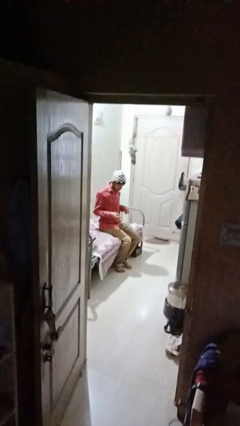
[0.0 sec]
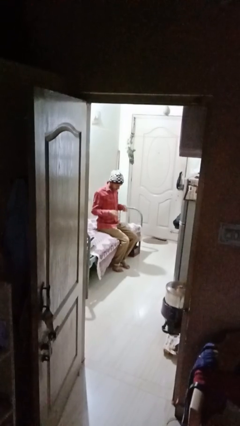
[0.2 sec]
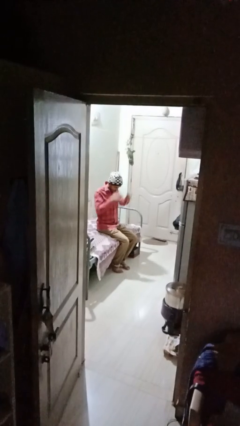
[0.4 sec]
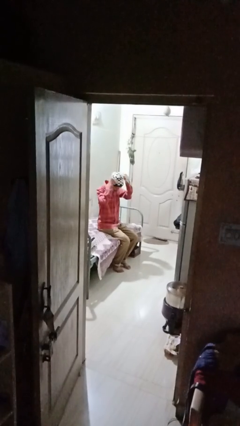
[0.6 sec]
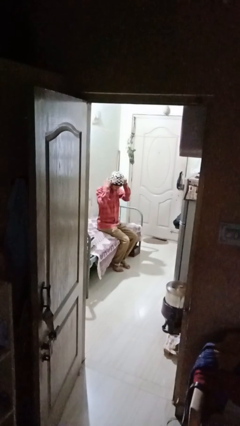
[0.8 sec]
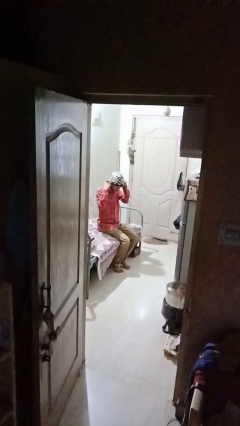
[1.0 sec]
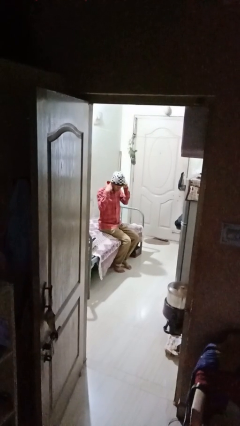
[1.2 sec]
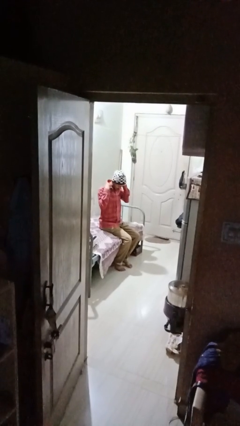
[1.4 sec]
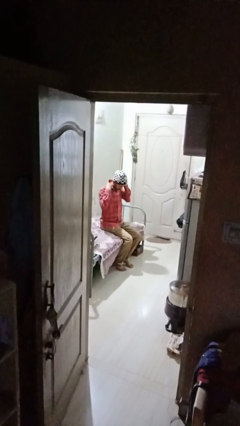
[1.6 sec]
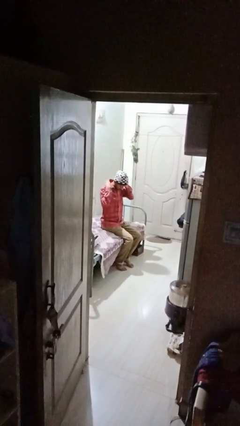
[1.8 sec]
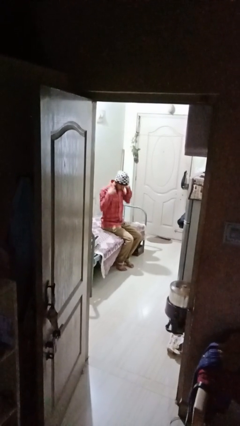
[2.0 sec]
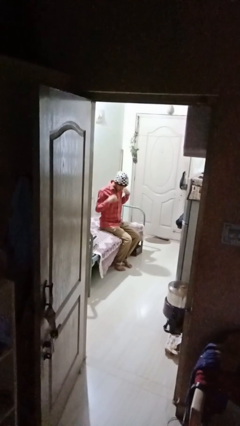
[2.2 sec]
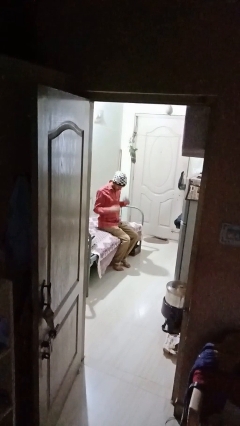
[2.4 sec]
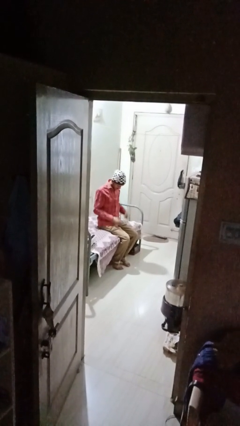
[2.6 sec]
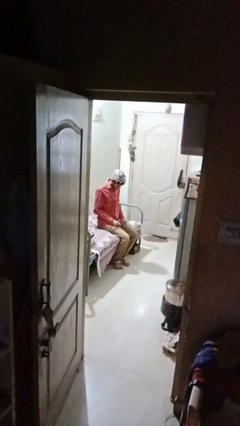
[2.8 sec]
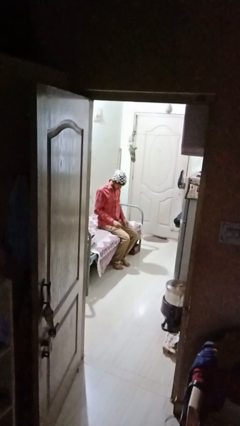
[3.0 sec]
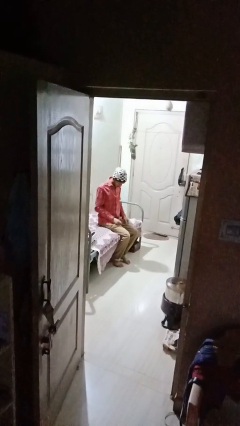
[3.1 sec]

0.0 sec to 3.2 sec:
person puts on necklace

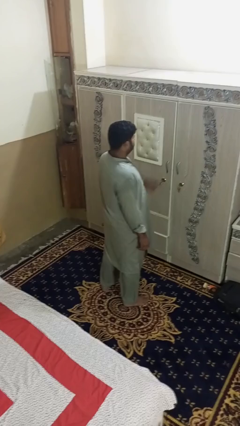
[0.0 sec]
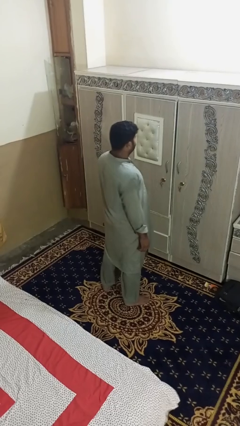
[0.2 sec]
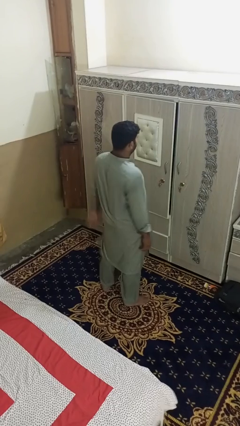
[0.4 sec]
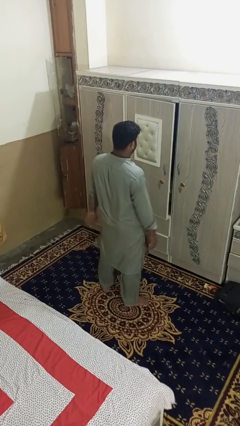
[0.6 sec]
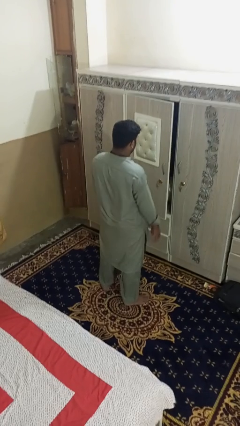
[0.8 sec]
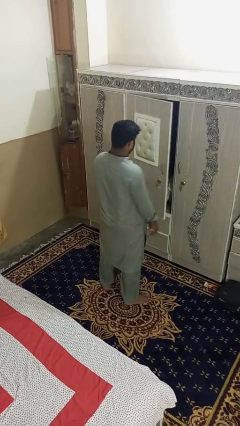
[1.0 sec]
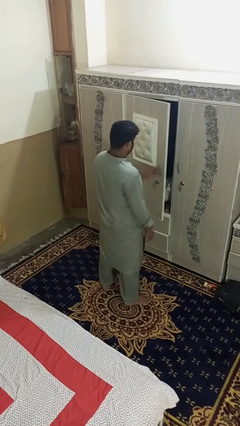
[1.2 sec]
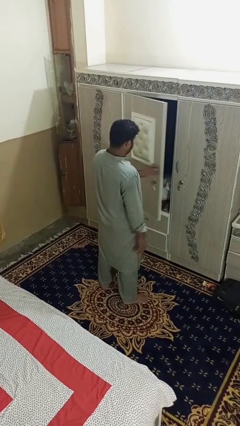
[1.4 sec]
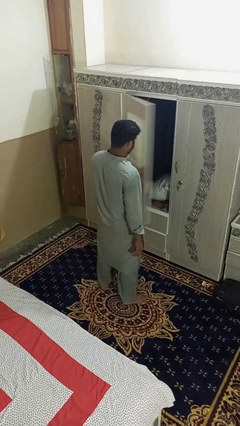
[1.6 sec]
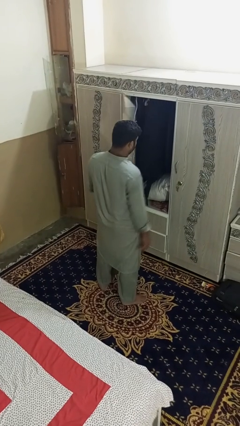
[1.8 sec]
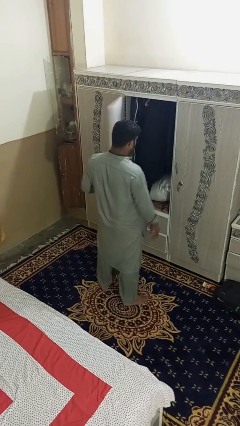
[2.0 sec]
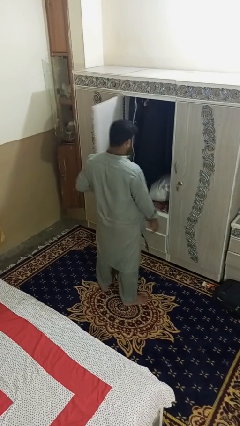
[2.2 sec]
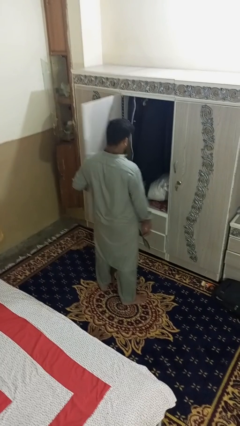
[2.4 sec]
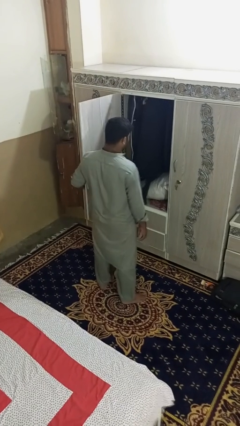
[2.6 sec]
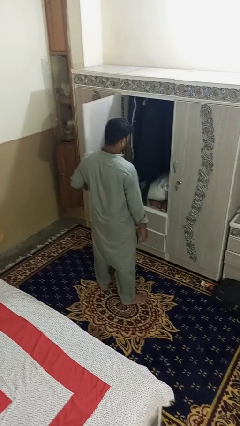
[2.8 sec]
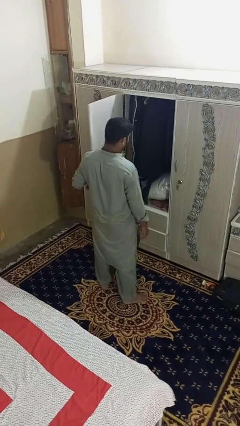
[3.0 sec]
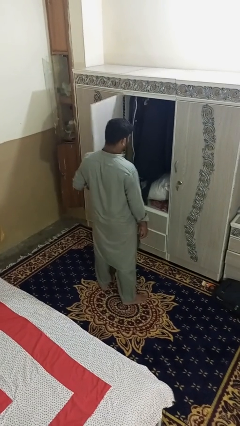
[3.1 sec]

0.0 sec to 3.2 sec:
person opens dresser drawer

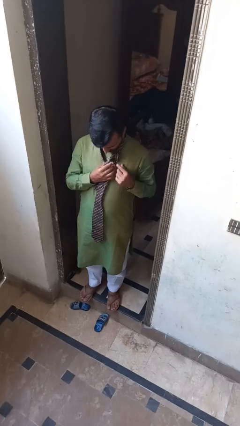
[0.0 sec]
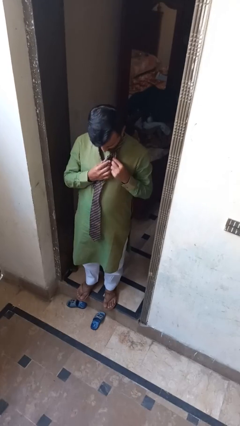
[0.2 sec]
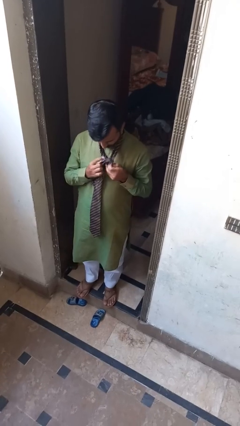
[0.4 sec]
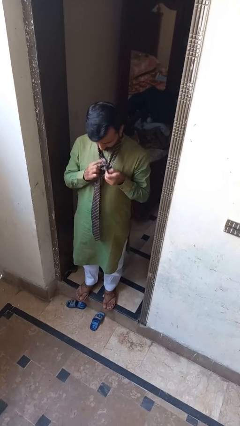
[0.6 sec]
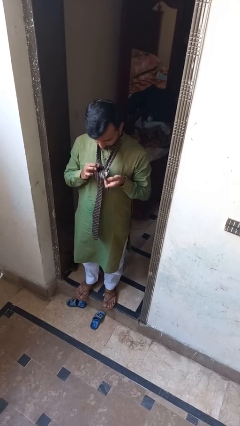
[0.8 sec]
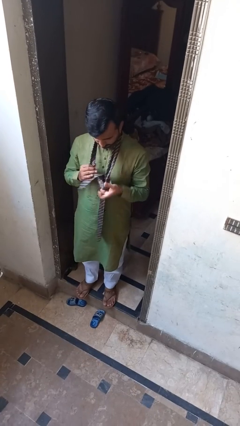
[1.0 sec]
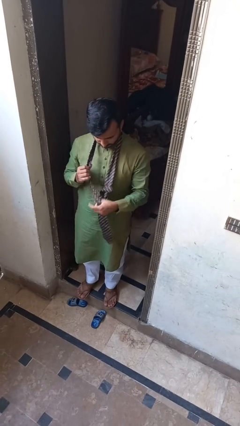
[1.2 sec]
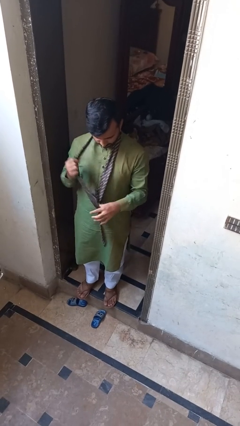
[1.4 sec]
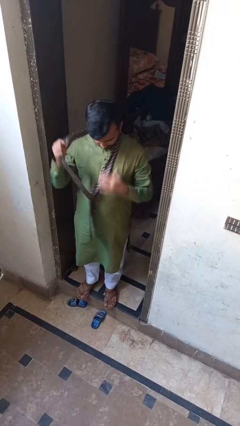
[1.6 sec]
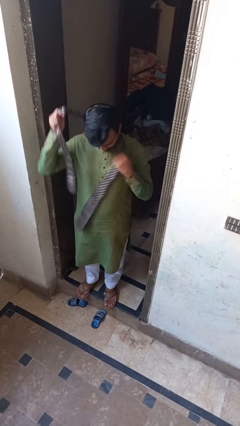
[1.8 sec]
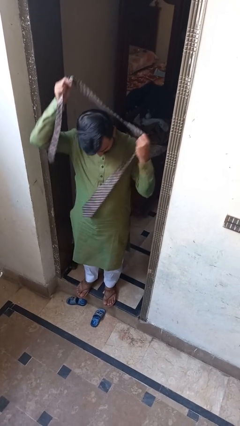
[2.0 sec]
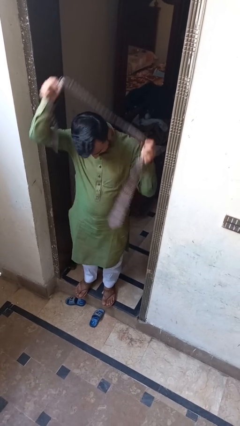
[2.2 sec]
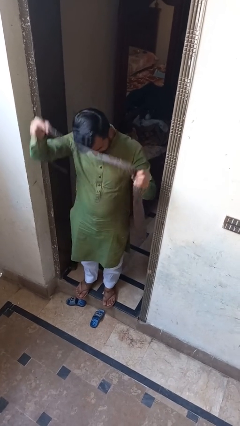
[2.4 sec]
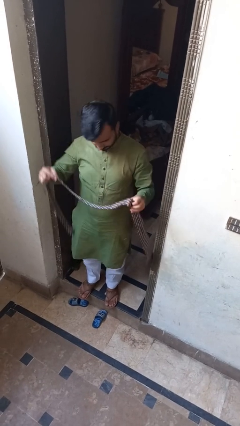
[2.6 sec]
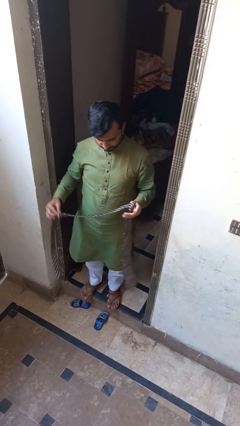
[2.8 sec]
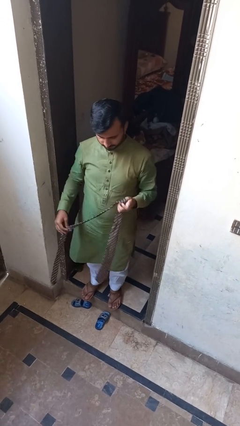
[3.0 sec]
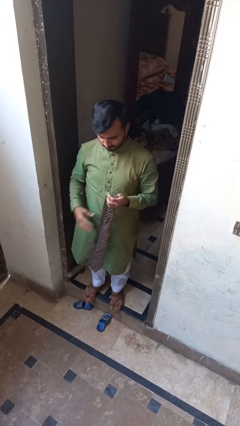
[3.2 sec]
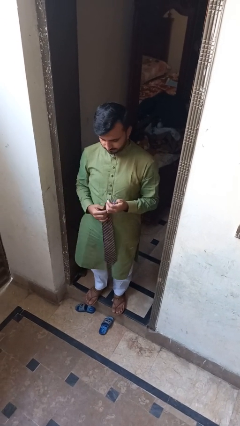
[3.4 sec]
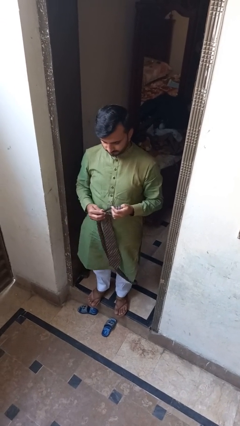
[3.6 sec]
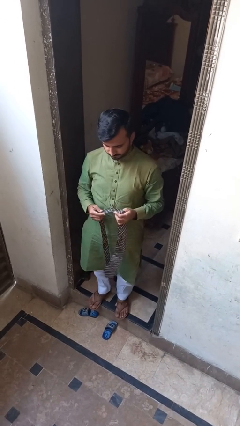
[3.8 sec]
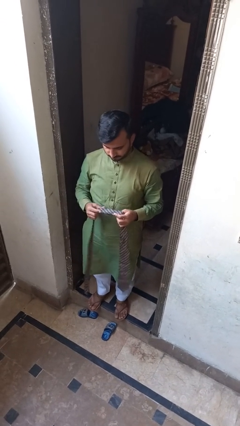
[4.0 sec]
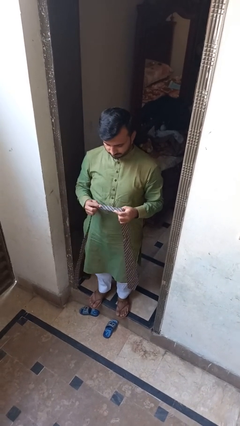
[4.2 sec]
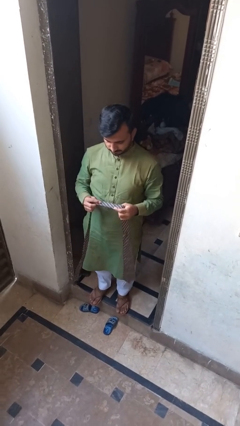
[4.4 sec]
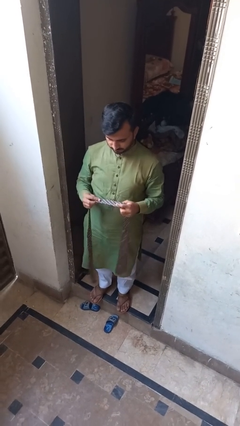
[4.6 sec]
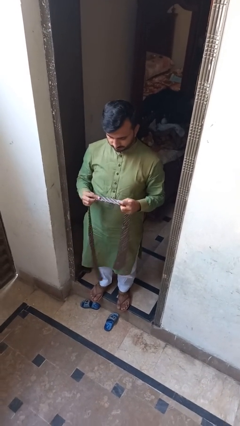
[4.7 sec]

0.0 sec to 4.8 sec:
person takes off necktie

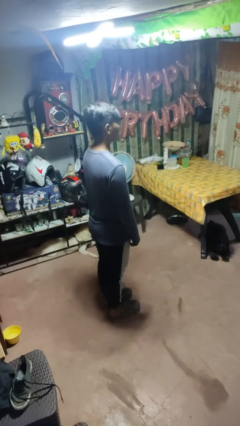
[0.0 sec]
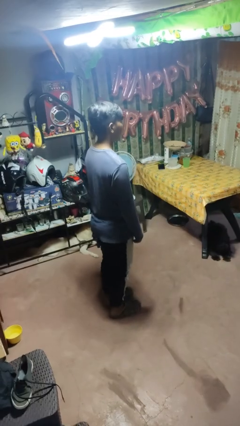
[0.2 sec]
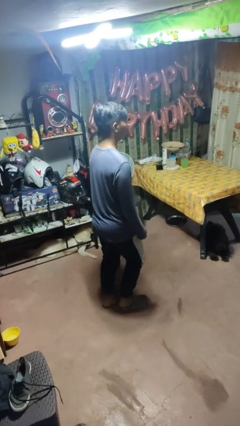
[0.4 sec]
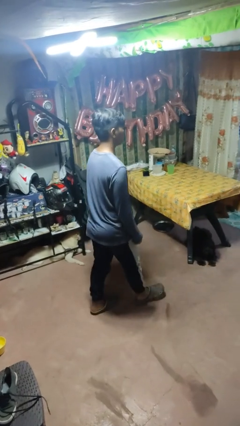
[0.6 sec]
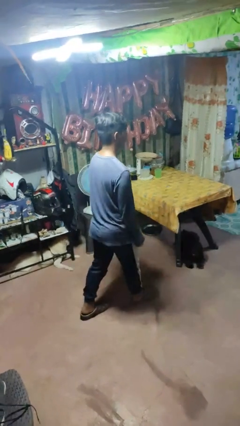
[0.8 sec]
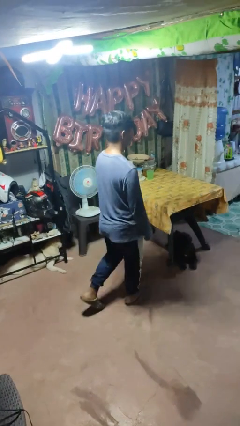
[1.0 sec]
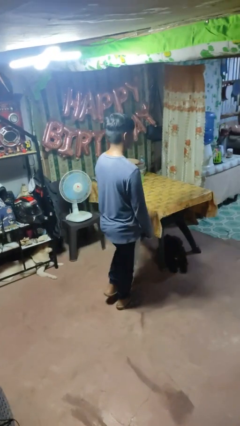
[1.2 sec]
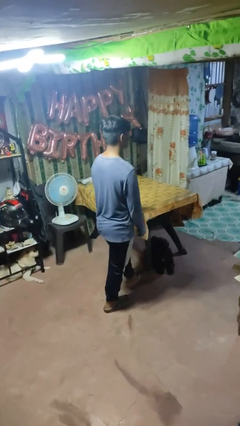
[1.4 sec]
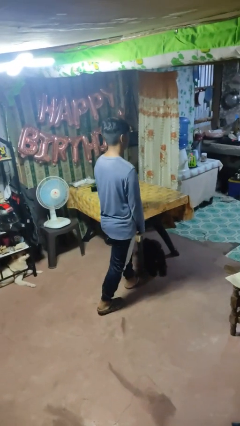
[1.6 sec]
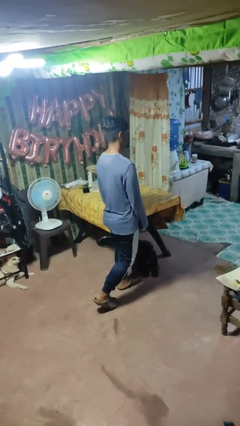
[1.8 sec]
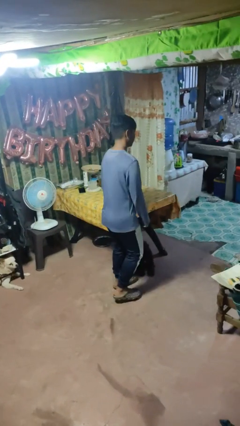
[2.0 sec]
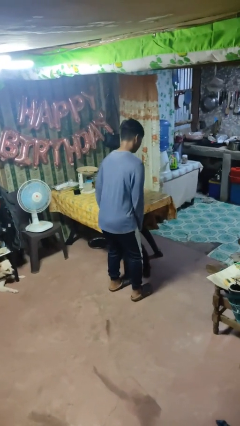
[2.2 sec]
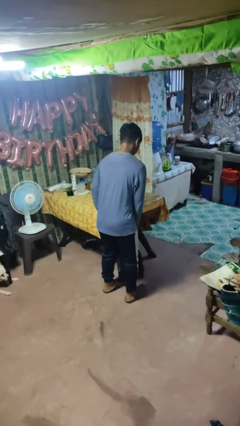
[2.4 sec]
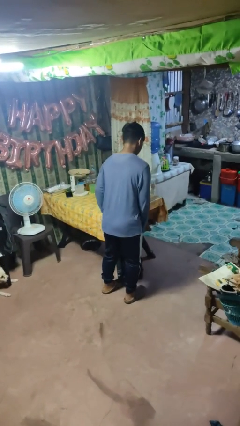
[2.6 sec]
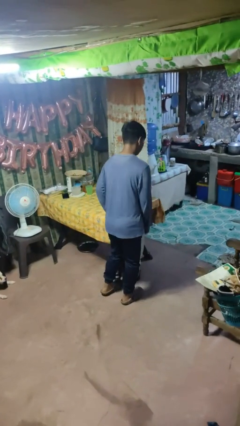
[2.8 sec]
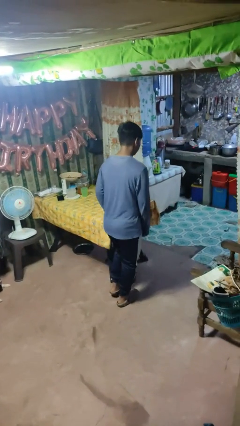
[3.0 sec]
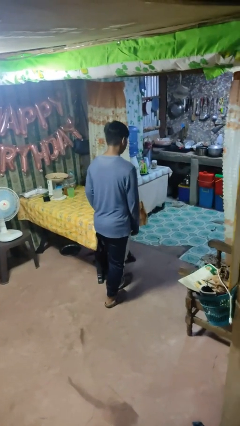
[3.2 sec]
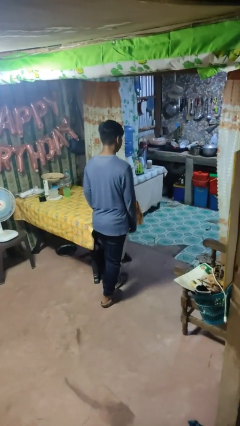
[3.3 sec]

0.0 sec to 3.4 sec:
person bumps into table

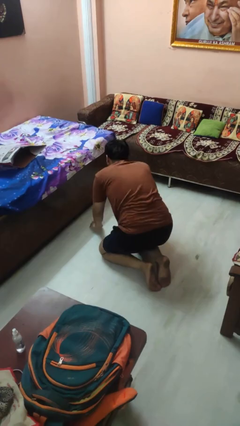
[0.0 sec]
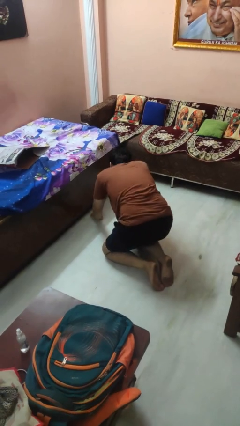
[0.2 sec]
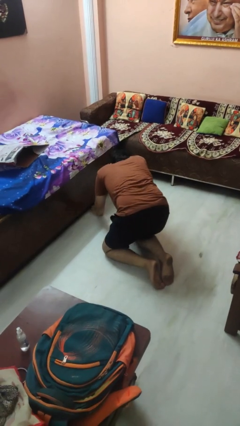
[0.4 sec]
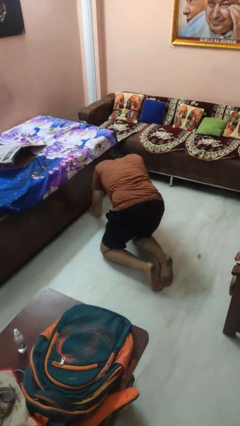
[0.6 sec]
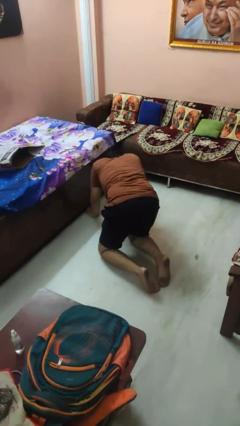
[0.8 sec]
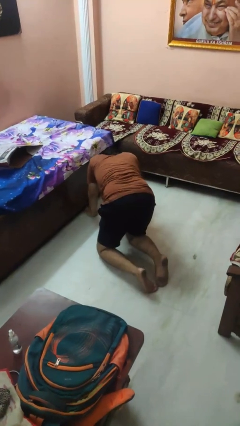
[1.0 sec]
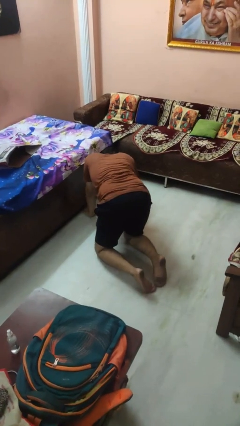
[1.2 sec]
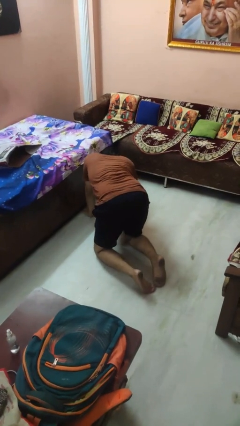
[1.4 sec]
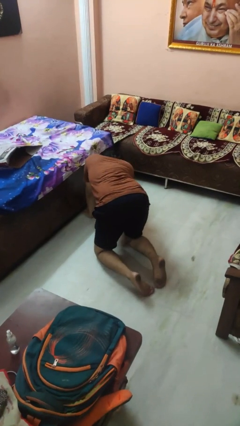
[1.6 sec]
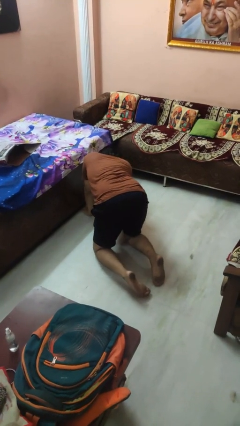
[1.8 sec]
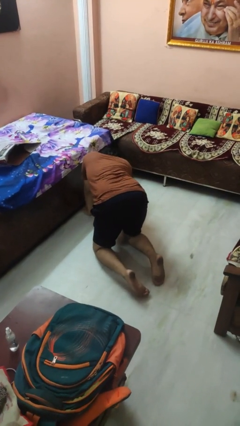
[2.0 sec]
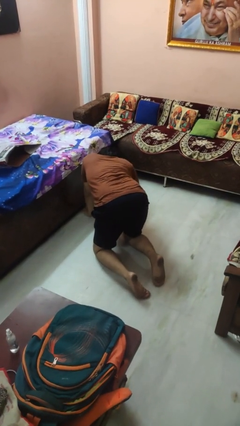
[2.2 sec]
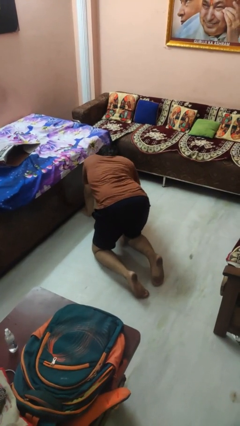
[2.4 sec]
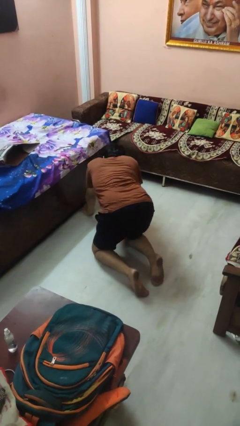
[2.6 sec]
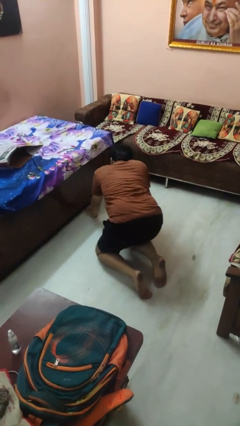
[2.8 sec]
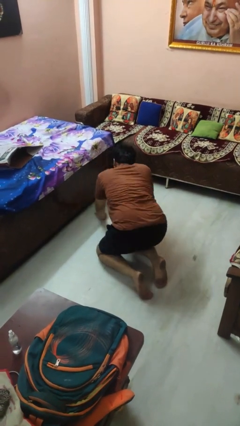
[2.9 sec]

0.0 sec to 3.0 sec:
person searches under bed
